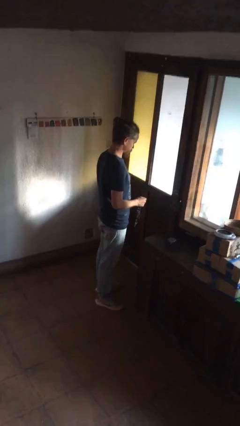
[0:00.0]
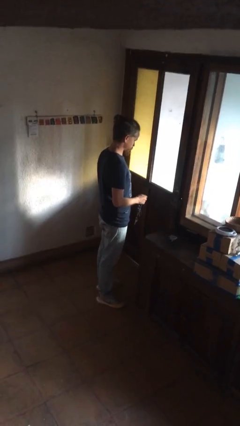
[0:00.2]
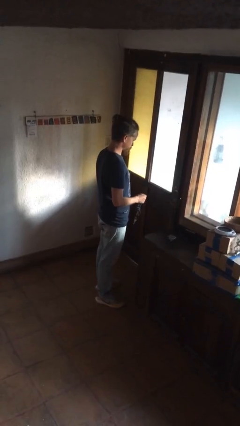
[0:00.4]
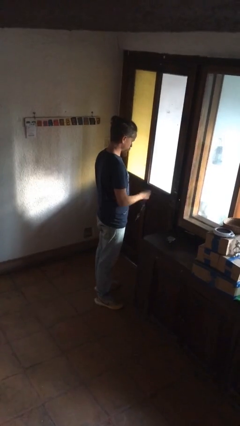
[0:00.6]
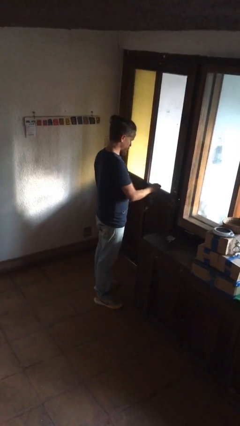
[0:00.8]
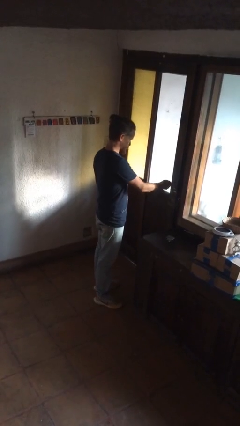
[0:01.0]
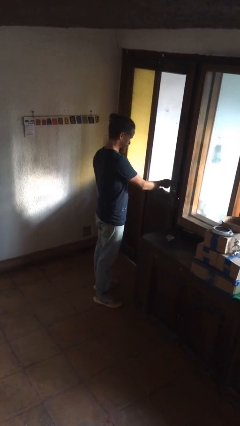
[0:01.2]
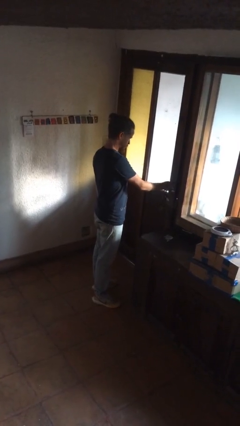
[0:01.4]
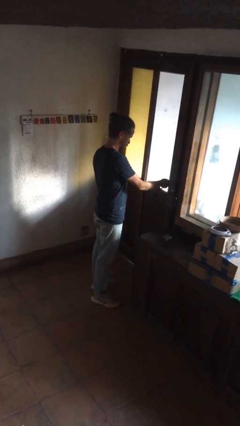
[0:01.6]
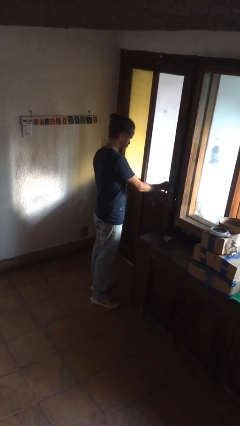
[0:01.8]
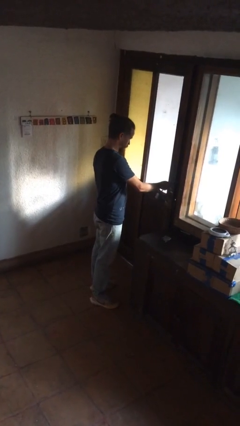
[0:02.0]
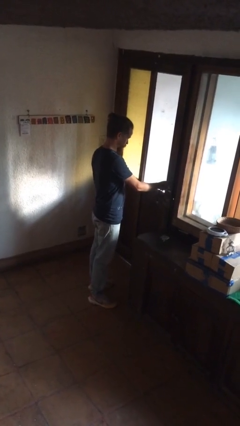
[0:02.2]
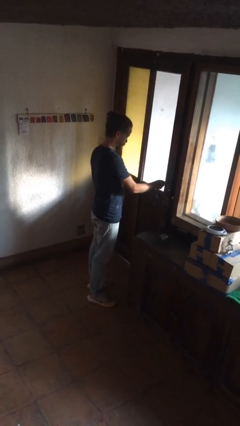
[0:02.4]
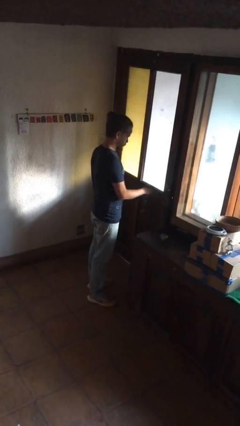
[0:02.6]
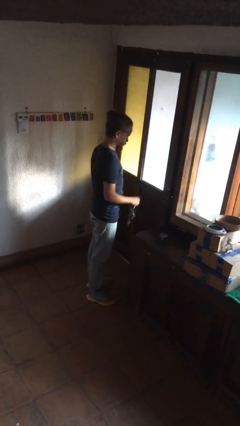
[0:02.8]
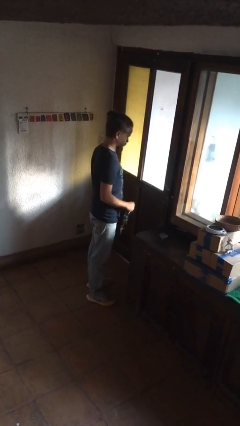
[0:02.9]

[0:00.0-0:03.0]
person unlocks door with keys

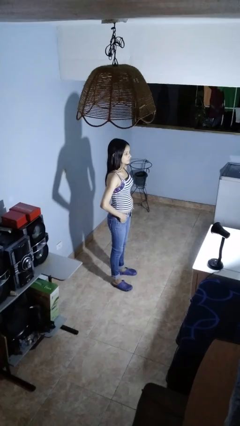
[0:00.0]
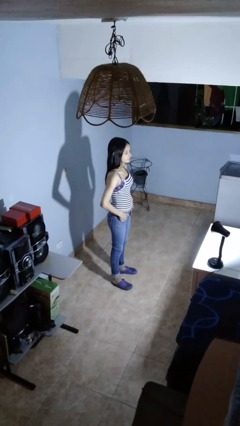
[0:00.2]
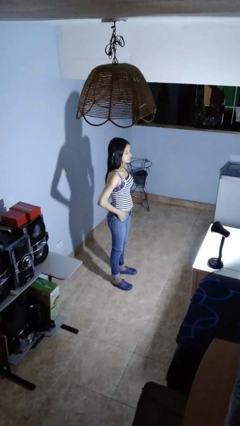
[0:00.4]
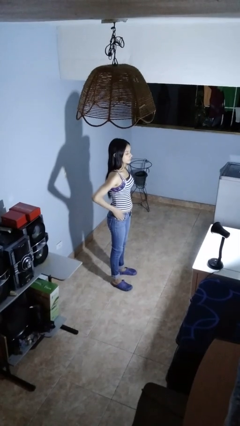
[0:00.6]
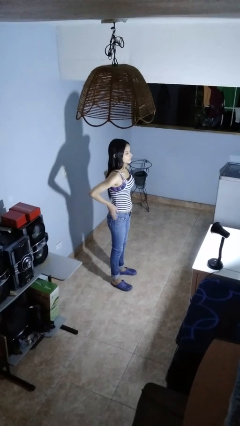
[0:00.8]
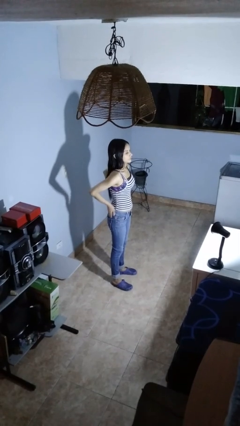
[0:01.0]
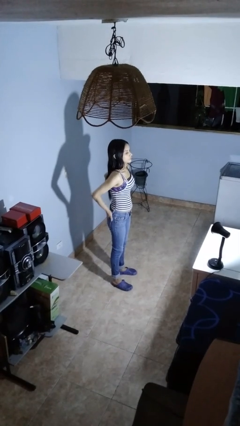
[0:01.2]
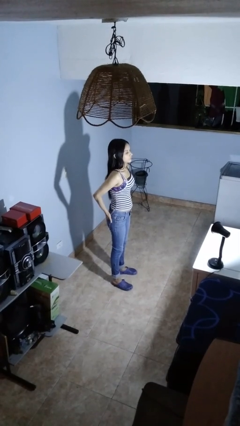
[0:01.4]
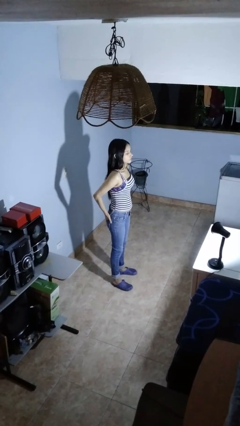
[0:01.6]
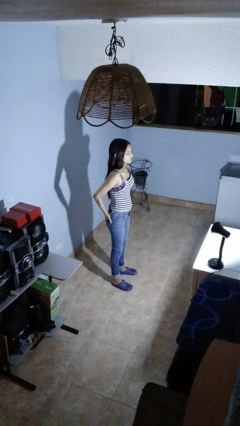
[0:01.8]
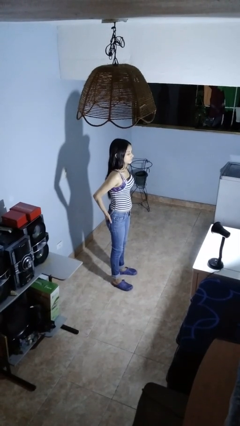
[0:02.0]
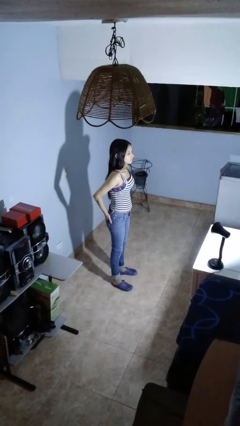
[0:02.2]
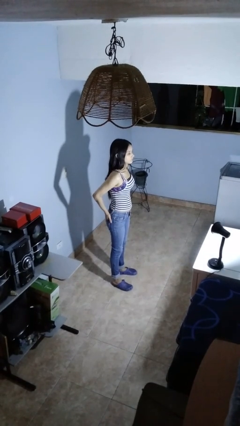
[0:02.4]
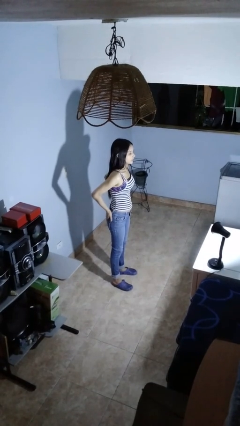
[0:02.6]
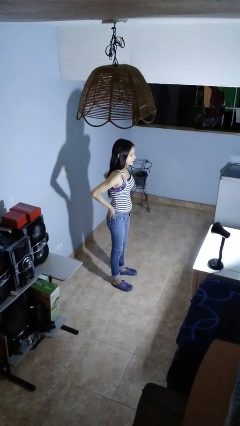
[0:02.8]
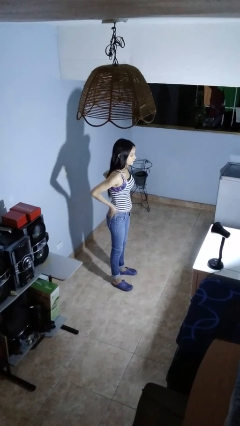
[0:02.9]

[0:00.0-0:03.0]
person puts hands in back pockets

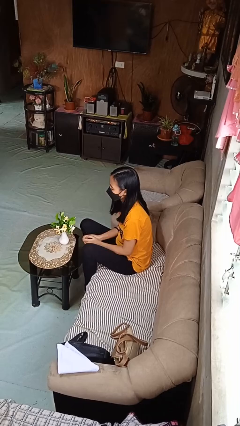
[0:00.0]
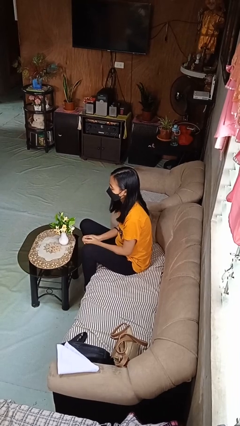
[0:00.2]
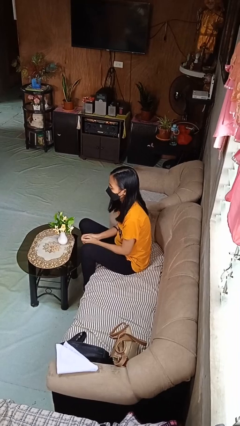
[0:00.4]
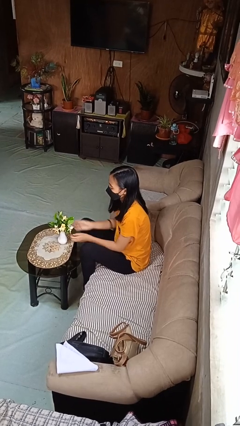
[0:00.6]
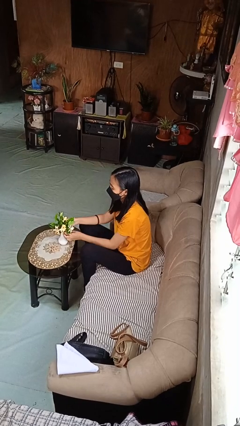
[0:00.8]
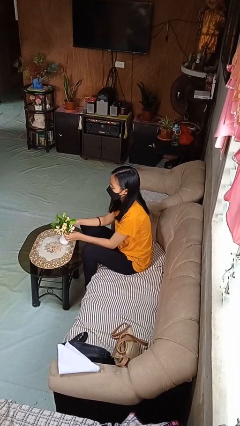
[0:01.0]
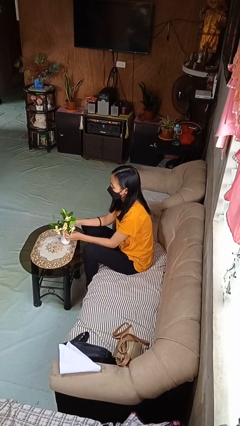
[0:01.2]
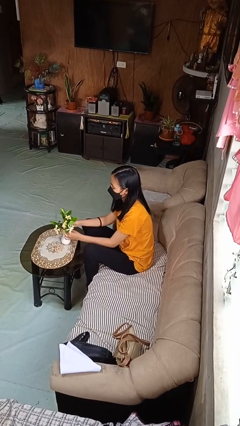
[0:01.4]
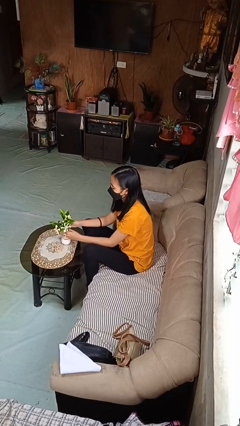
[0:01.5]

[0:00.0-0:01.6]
person arranges flowers in vase

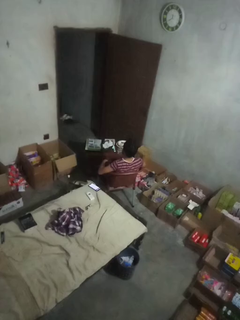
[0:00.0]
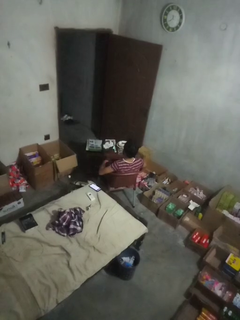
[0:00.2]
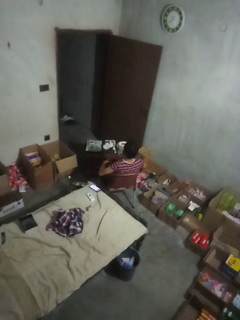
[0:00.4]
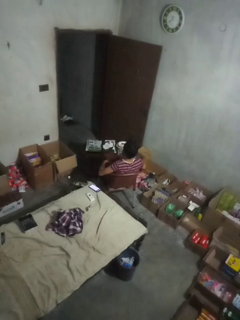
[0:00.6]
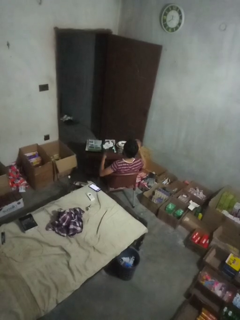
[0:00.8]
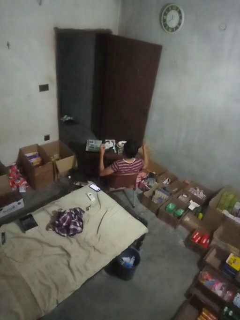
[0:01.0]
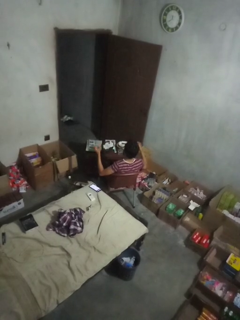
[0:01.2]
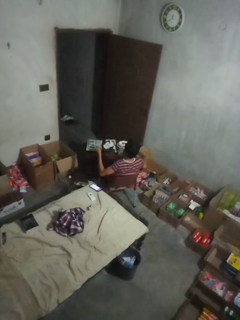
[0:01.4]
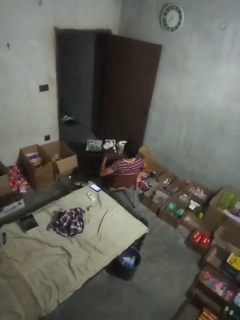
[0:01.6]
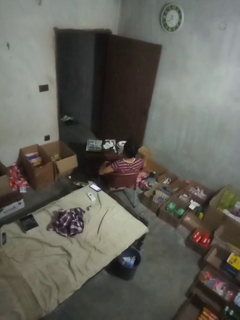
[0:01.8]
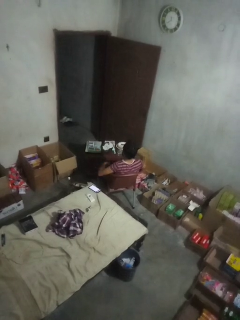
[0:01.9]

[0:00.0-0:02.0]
person snaps fingers

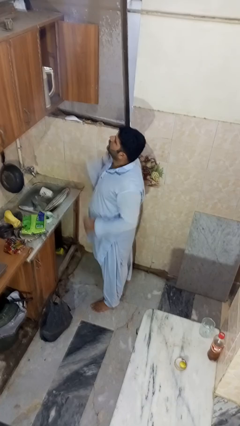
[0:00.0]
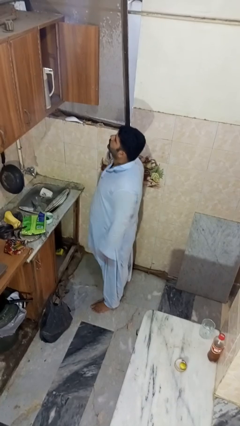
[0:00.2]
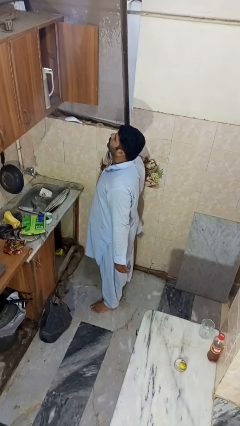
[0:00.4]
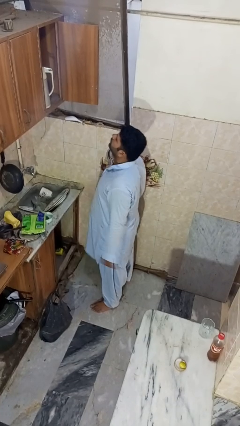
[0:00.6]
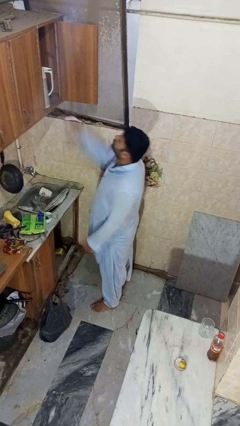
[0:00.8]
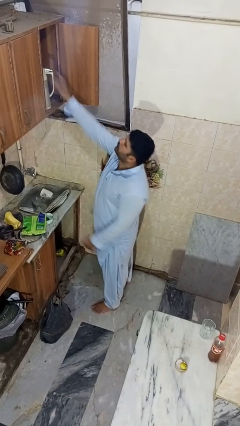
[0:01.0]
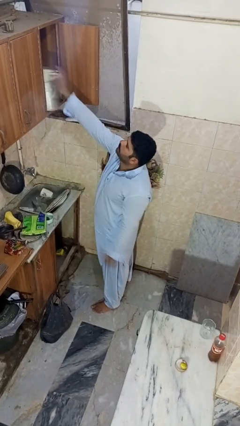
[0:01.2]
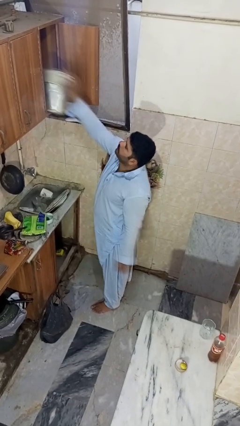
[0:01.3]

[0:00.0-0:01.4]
person takes object from cabinet

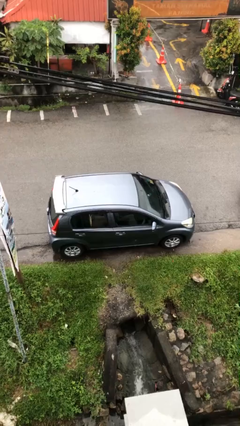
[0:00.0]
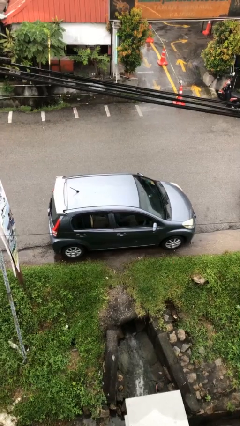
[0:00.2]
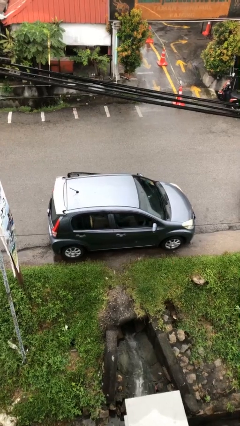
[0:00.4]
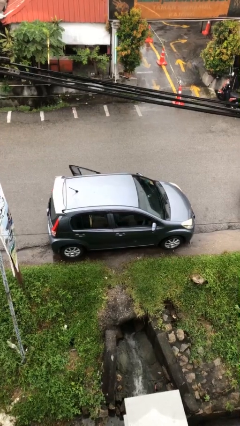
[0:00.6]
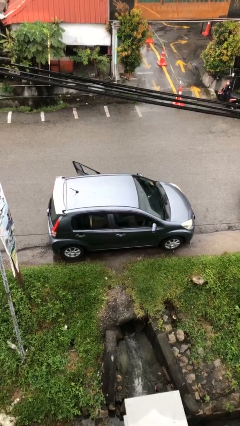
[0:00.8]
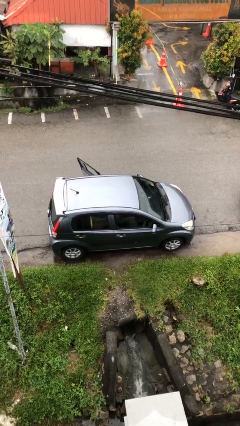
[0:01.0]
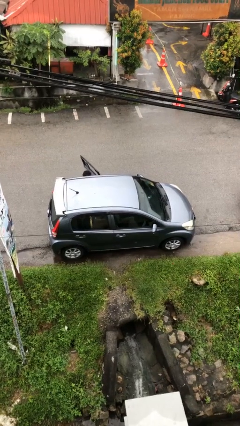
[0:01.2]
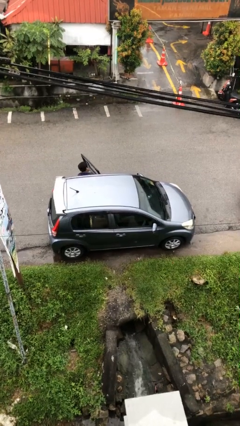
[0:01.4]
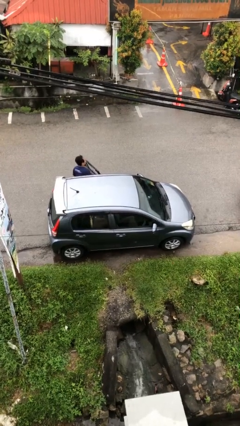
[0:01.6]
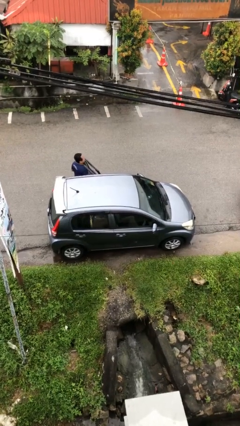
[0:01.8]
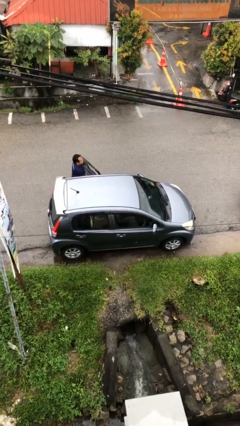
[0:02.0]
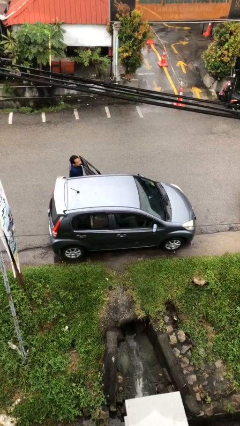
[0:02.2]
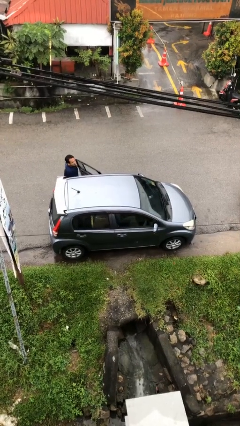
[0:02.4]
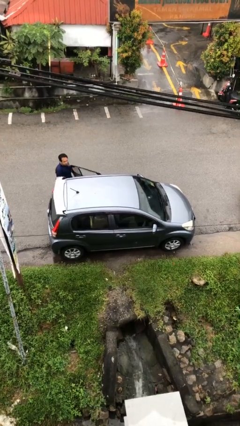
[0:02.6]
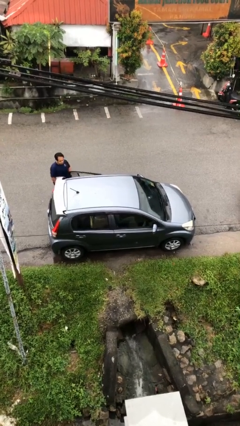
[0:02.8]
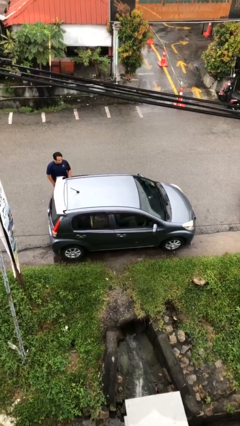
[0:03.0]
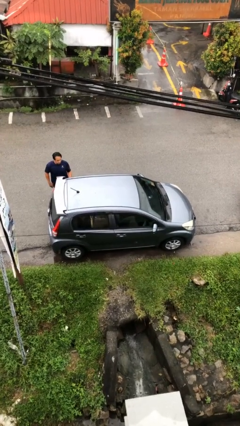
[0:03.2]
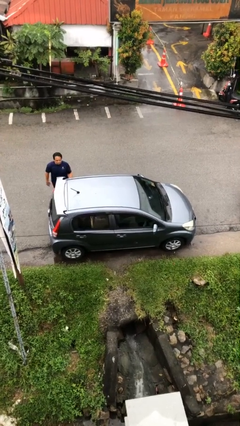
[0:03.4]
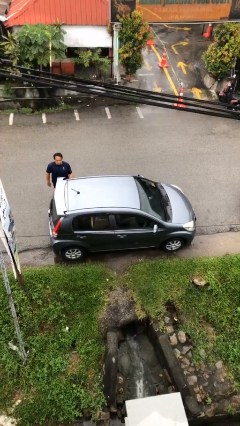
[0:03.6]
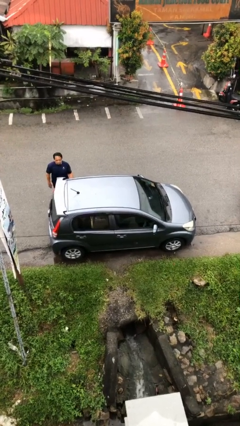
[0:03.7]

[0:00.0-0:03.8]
car drops off person

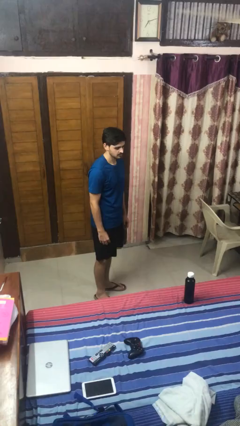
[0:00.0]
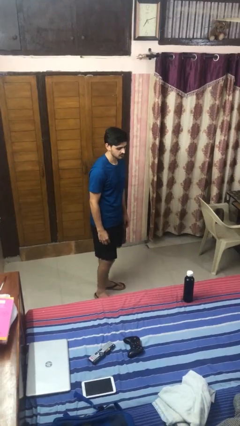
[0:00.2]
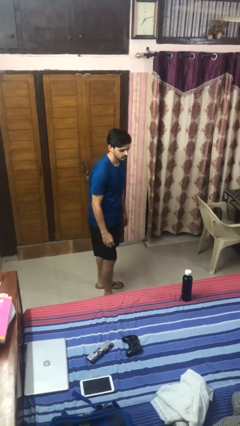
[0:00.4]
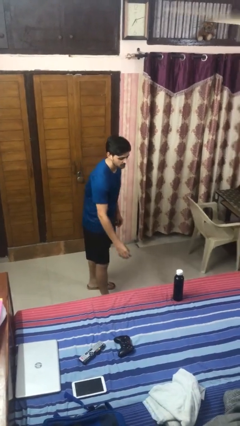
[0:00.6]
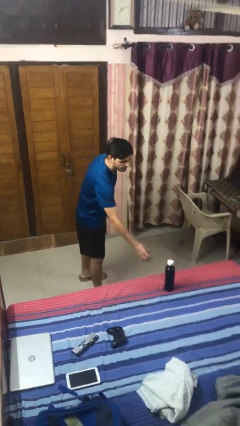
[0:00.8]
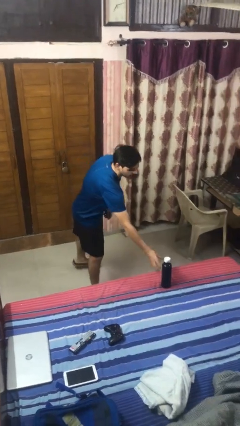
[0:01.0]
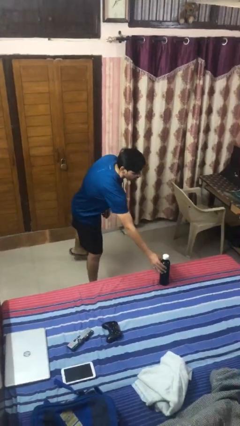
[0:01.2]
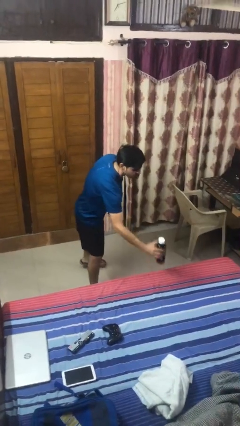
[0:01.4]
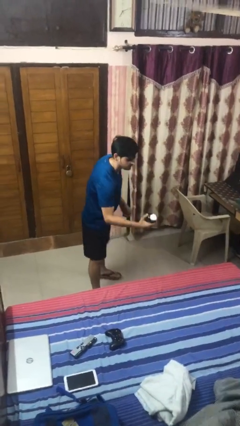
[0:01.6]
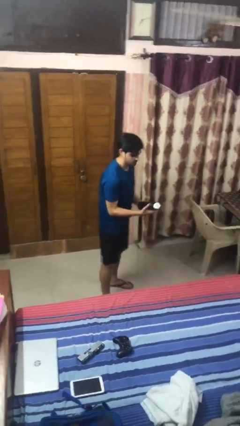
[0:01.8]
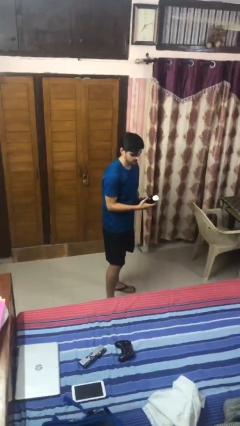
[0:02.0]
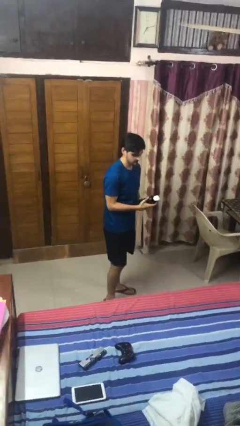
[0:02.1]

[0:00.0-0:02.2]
person picks up object from bed

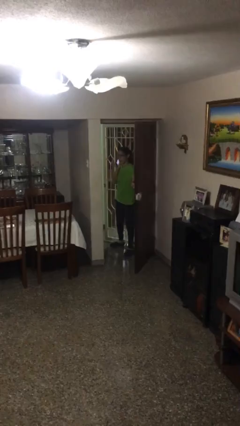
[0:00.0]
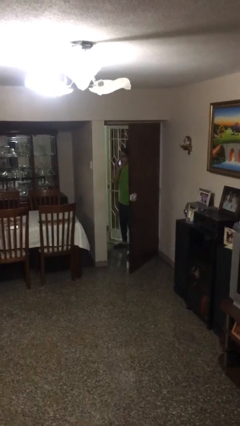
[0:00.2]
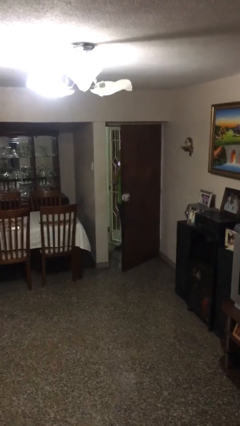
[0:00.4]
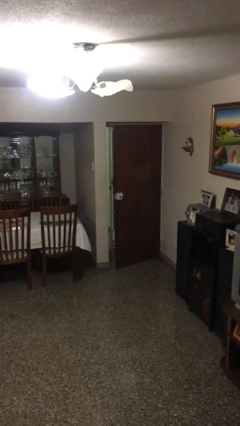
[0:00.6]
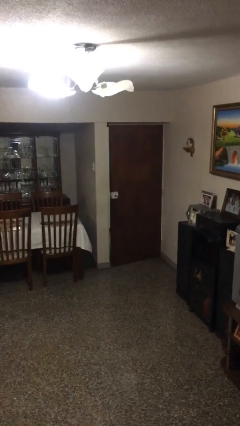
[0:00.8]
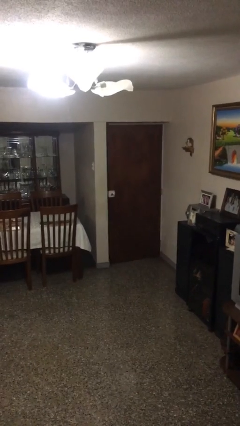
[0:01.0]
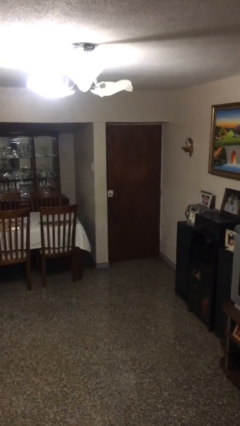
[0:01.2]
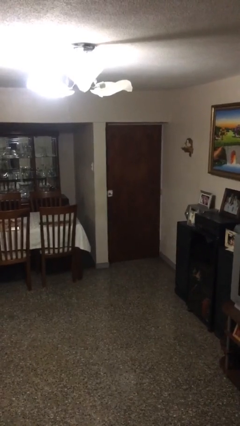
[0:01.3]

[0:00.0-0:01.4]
person closes facility door
